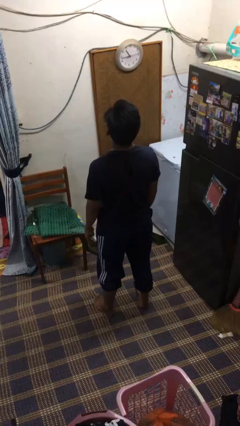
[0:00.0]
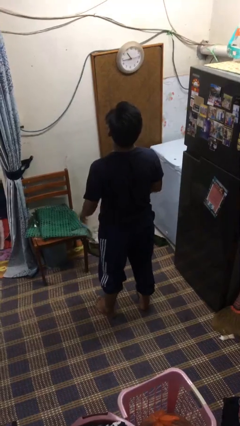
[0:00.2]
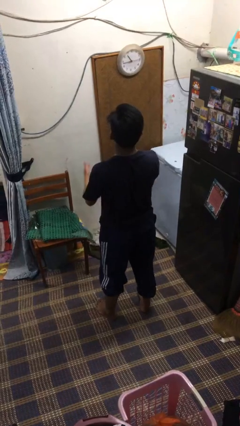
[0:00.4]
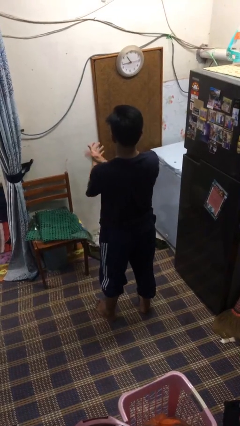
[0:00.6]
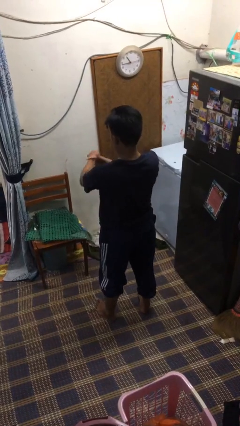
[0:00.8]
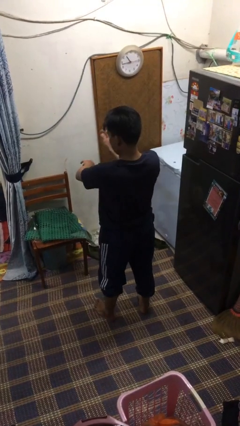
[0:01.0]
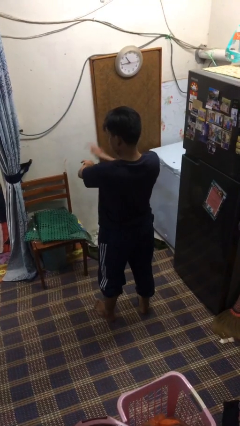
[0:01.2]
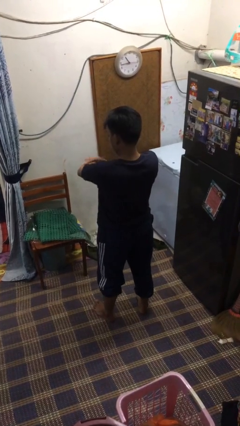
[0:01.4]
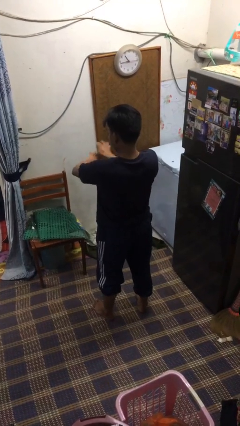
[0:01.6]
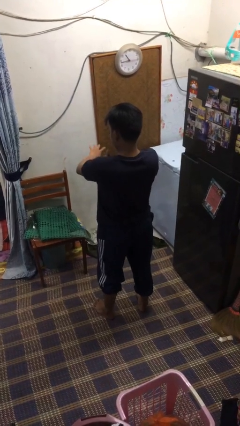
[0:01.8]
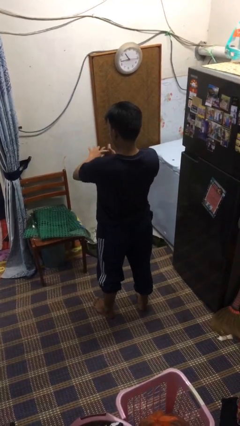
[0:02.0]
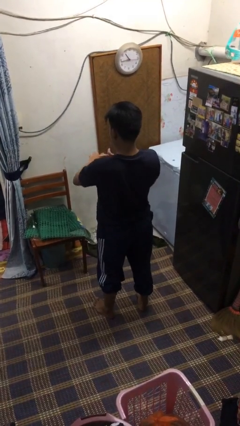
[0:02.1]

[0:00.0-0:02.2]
person swats bug

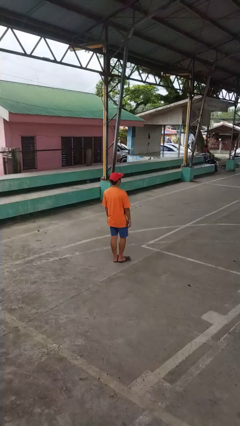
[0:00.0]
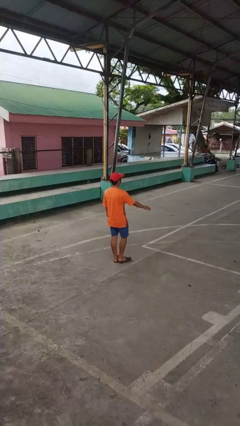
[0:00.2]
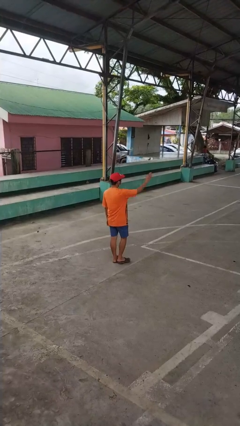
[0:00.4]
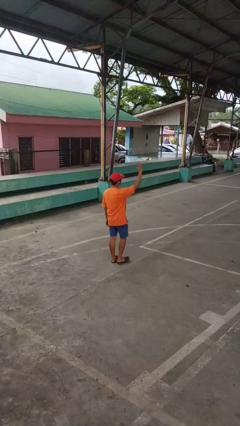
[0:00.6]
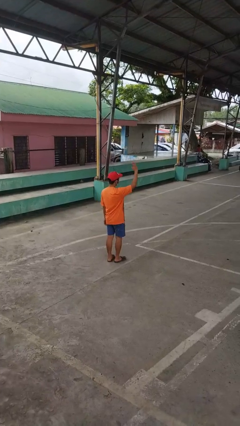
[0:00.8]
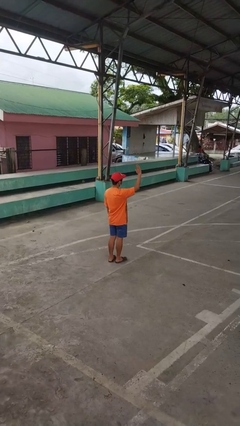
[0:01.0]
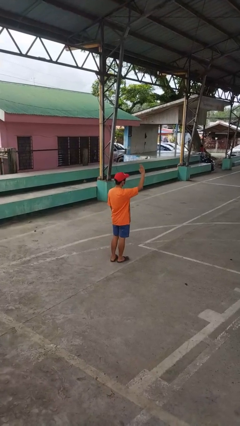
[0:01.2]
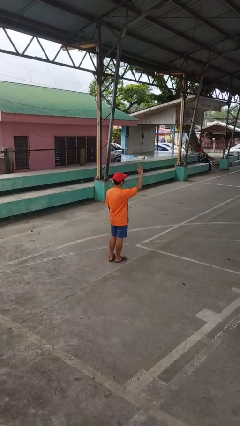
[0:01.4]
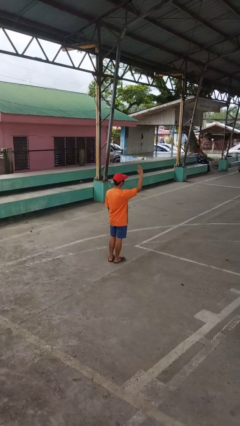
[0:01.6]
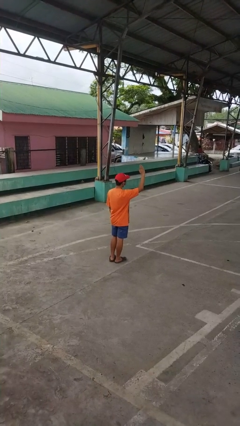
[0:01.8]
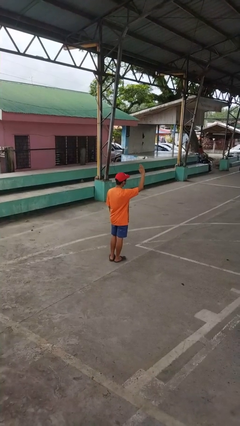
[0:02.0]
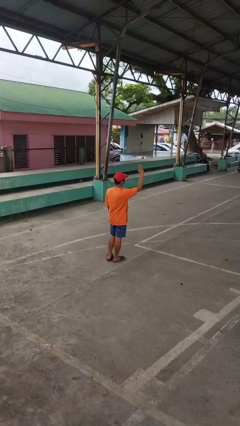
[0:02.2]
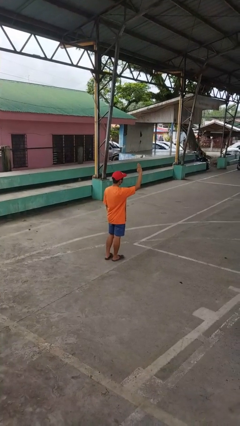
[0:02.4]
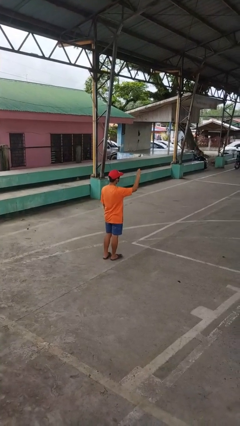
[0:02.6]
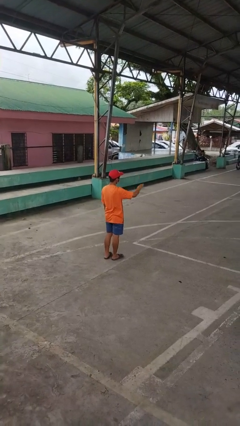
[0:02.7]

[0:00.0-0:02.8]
person gestures raise hand

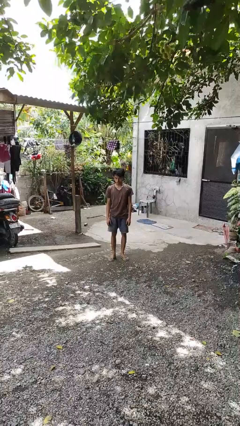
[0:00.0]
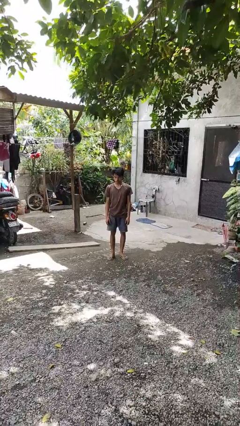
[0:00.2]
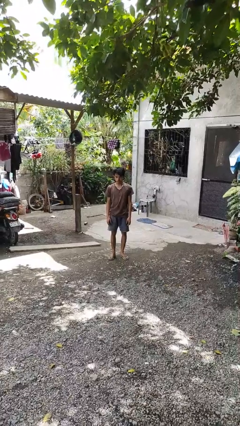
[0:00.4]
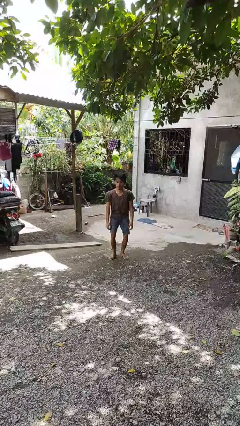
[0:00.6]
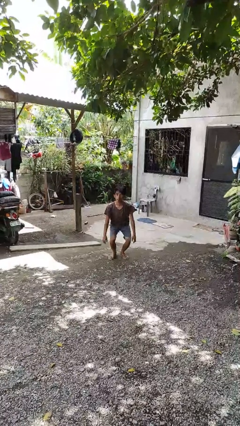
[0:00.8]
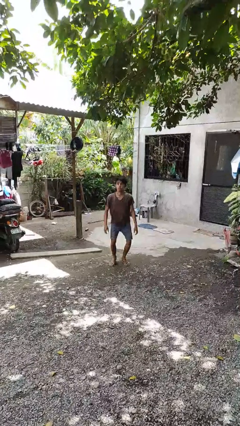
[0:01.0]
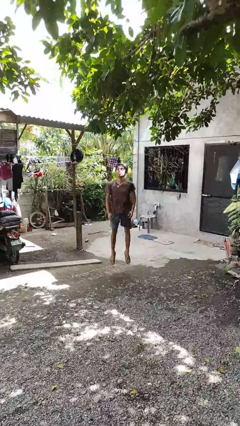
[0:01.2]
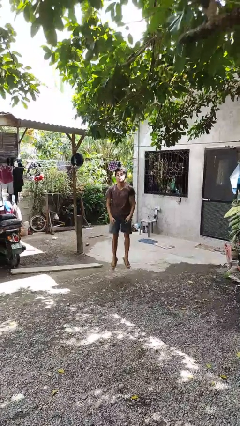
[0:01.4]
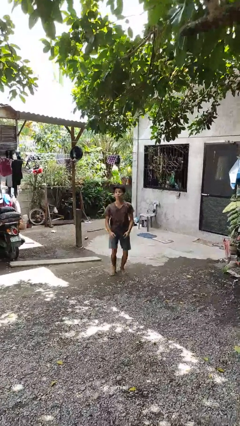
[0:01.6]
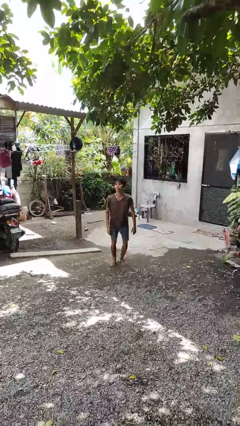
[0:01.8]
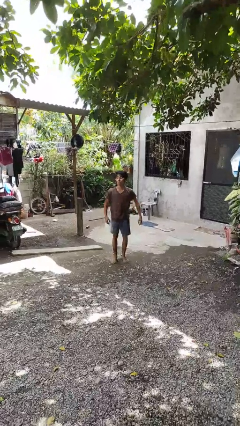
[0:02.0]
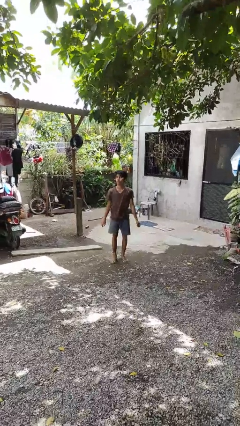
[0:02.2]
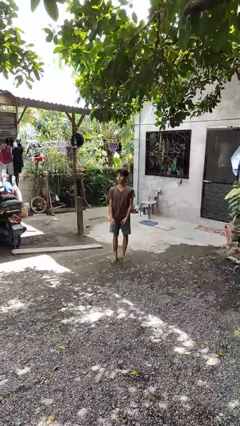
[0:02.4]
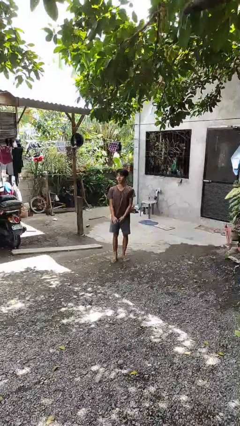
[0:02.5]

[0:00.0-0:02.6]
person jumps

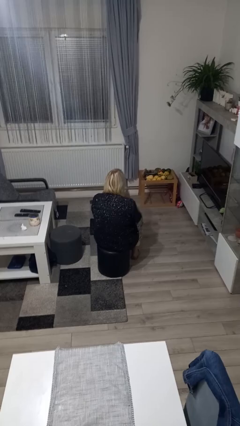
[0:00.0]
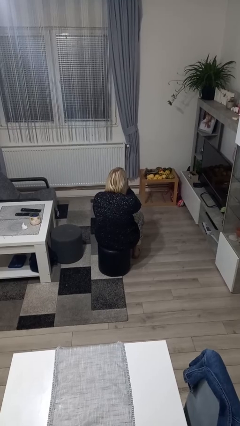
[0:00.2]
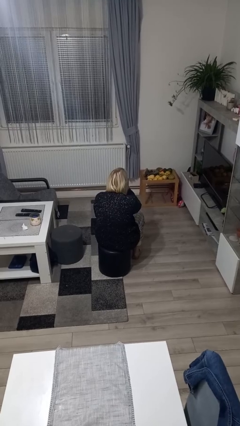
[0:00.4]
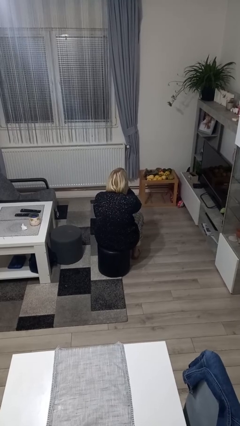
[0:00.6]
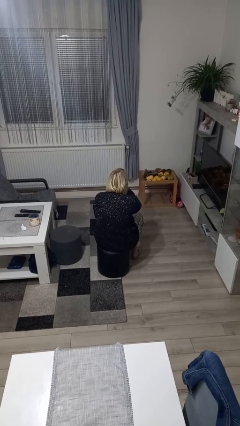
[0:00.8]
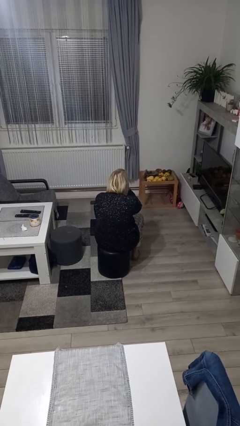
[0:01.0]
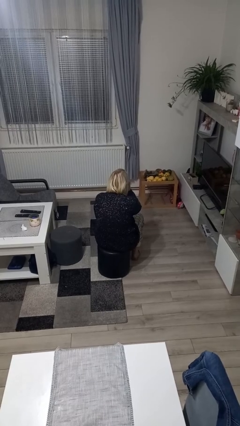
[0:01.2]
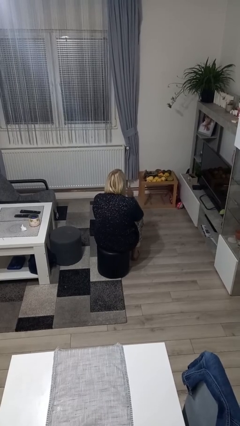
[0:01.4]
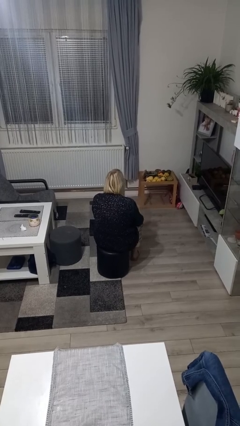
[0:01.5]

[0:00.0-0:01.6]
person gestures be quiet

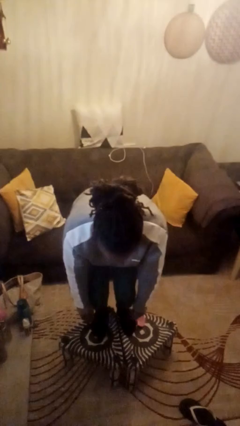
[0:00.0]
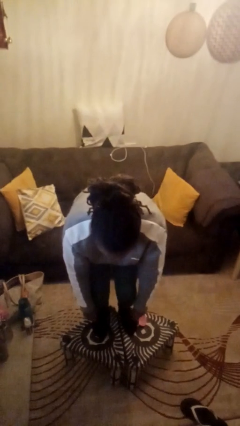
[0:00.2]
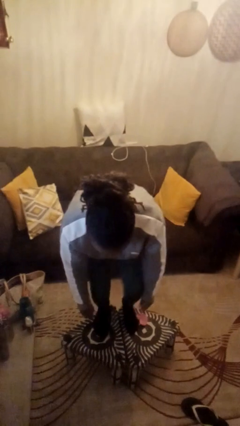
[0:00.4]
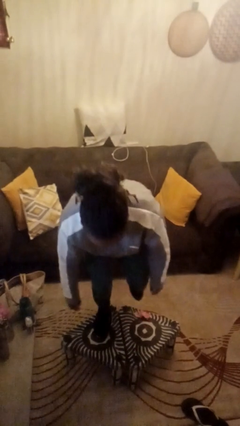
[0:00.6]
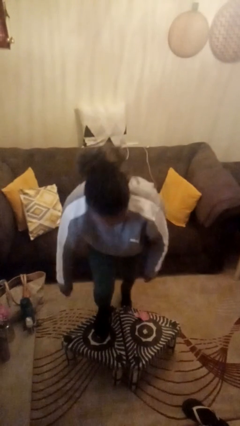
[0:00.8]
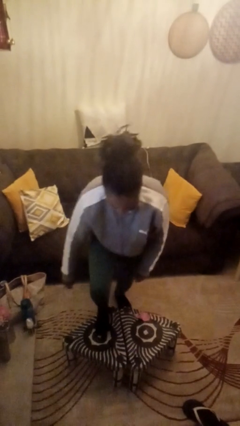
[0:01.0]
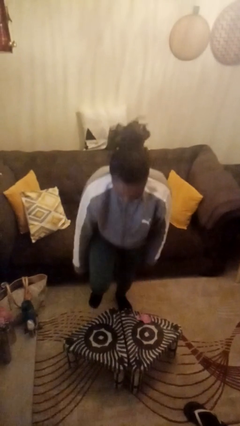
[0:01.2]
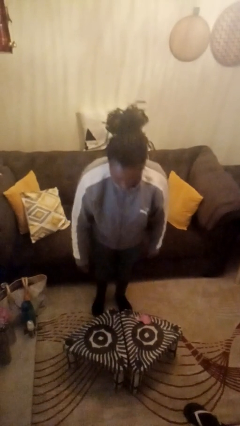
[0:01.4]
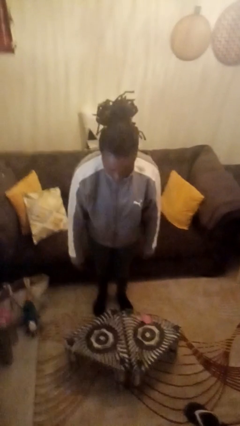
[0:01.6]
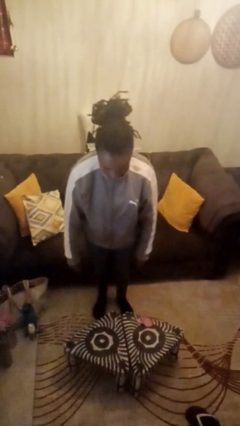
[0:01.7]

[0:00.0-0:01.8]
person climbs off table

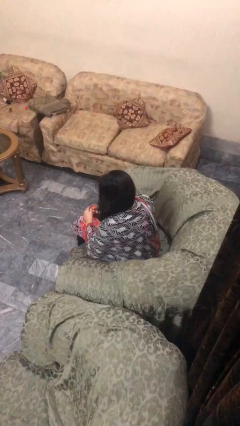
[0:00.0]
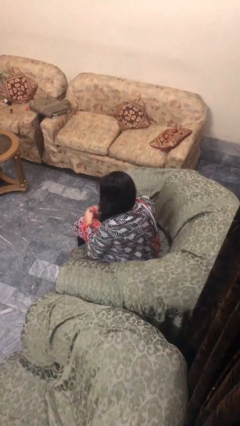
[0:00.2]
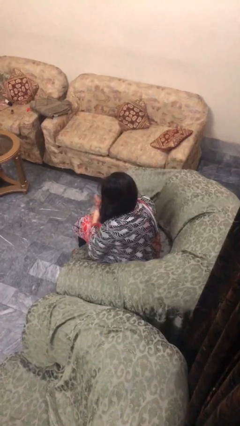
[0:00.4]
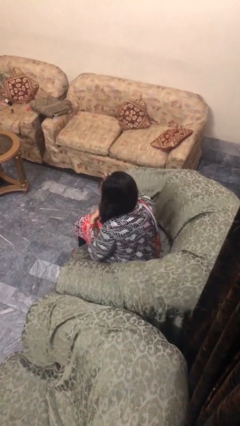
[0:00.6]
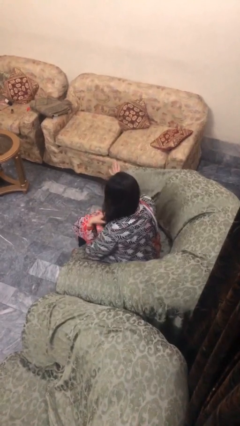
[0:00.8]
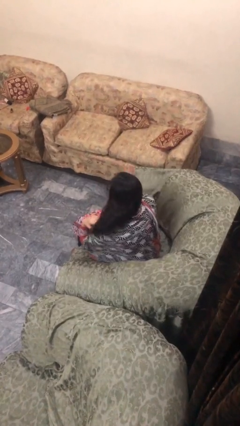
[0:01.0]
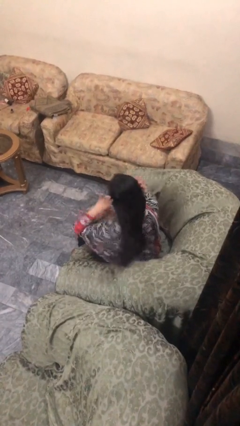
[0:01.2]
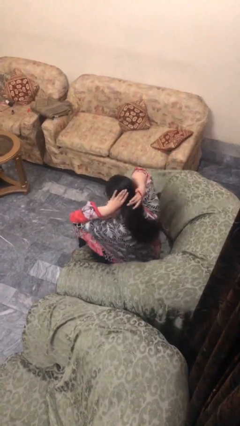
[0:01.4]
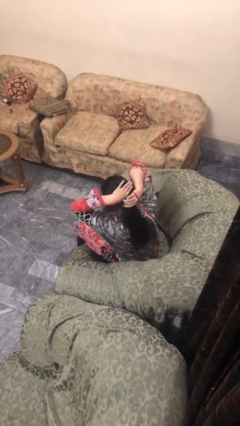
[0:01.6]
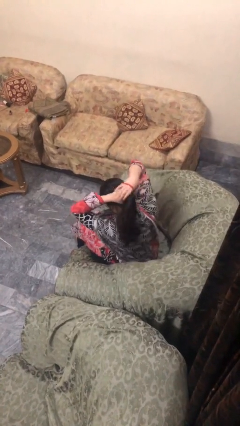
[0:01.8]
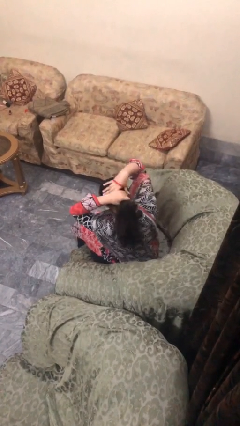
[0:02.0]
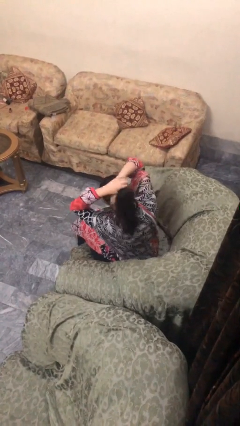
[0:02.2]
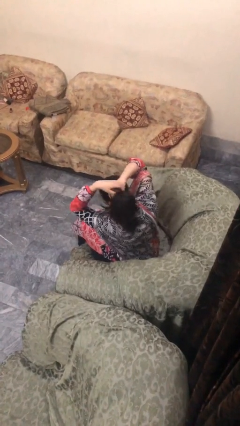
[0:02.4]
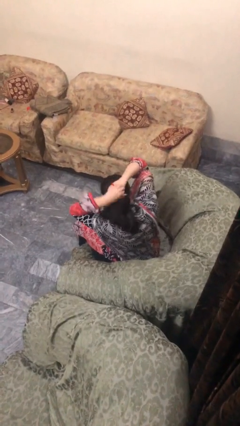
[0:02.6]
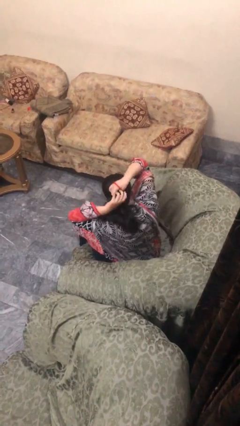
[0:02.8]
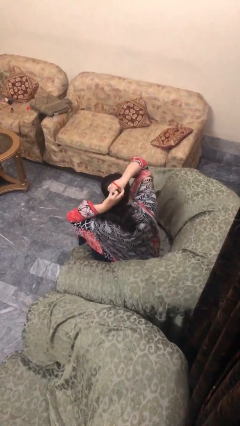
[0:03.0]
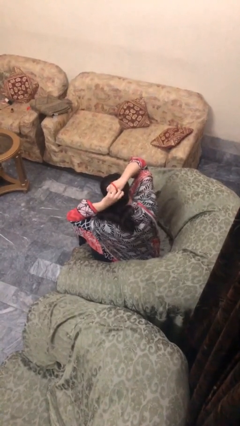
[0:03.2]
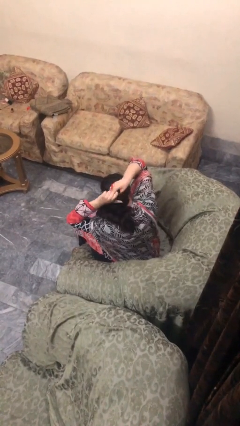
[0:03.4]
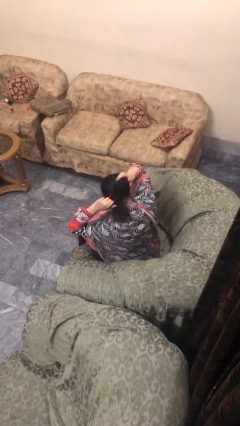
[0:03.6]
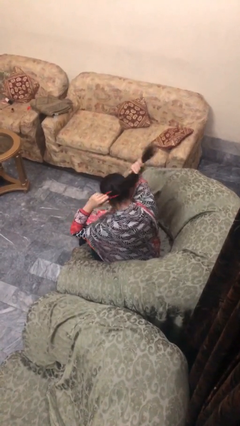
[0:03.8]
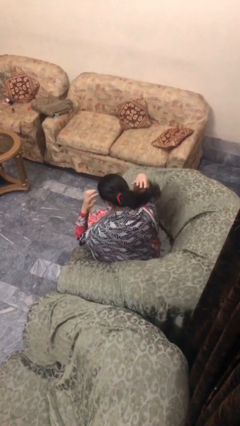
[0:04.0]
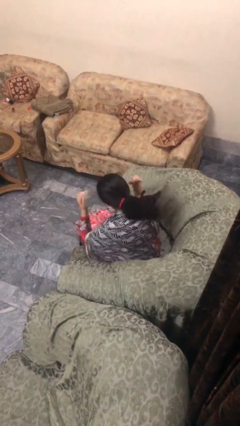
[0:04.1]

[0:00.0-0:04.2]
person puts hair in ponytail

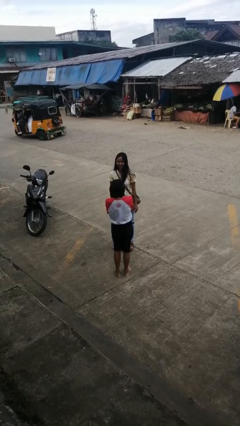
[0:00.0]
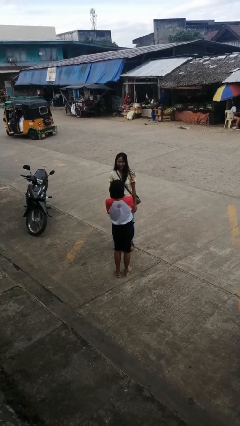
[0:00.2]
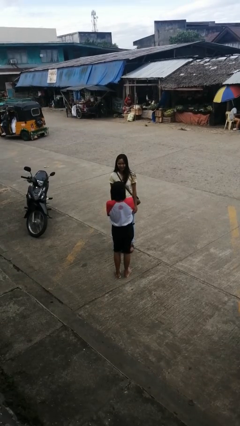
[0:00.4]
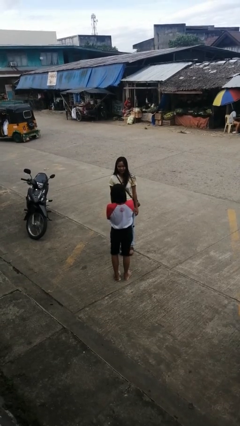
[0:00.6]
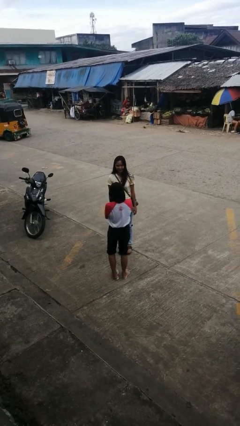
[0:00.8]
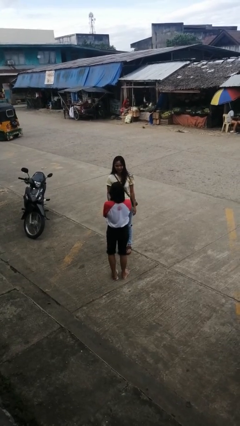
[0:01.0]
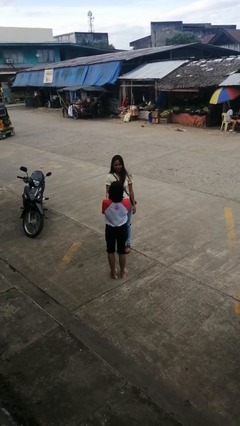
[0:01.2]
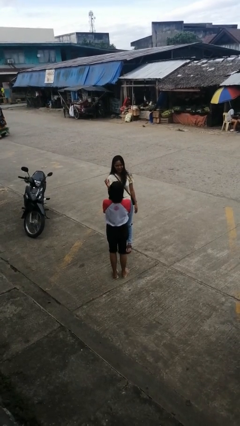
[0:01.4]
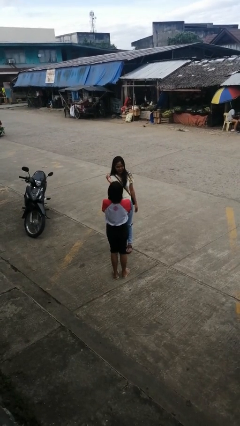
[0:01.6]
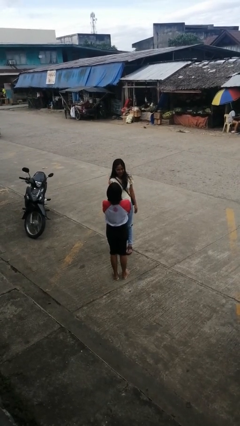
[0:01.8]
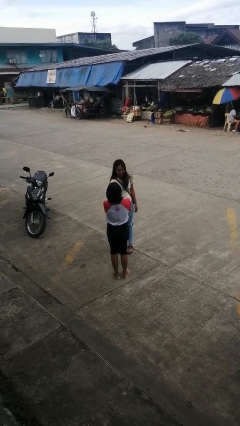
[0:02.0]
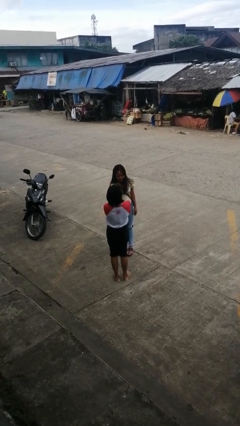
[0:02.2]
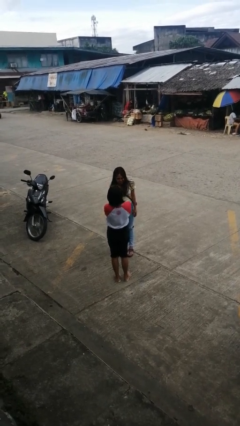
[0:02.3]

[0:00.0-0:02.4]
person laughs with person
